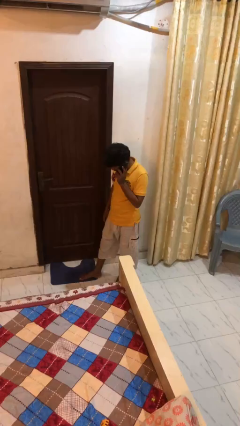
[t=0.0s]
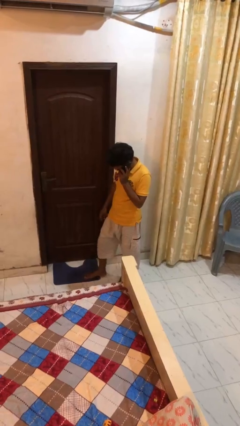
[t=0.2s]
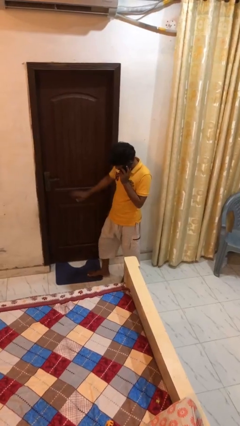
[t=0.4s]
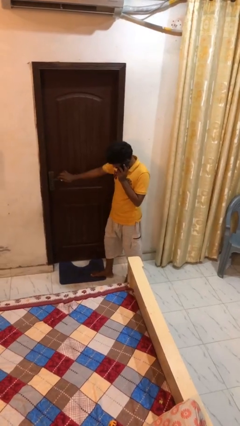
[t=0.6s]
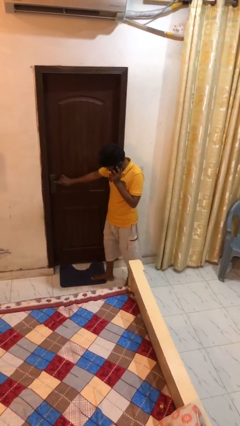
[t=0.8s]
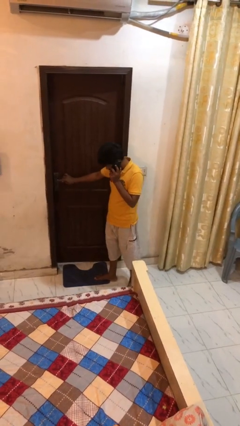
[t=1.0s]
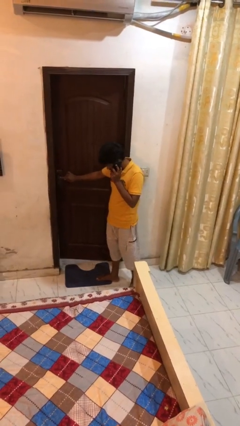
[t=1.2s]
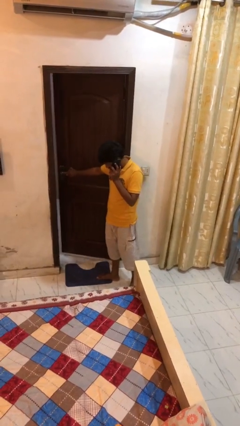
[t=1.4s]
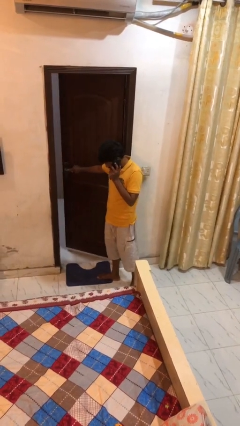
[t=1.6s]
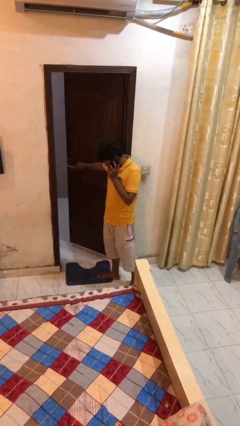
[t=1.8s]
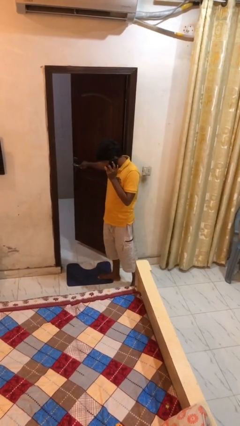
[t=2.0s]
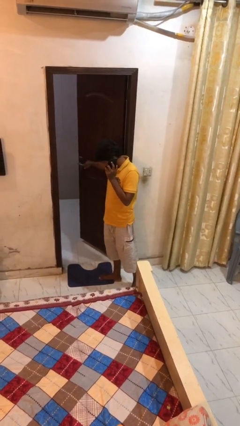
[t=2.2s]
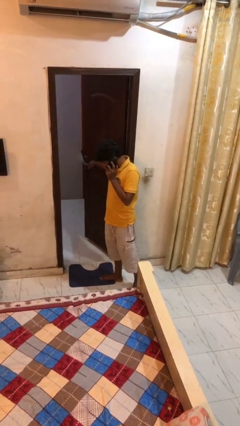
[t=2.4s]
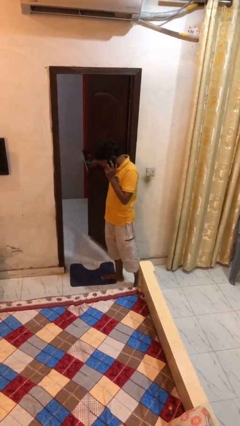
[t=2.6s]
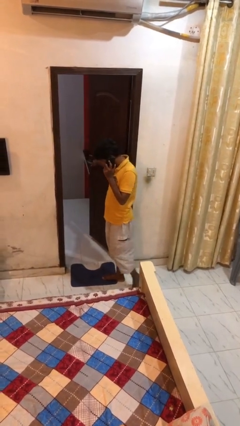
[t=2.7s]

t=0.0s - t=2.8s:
person opens facility door

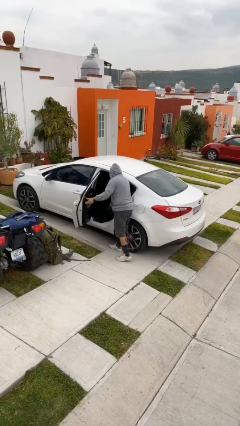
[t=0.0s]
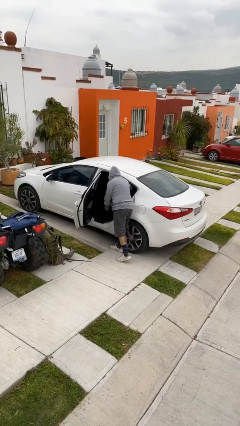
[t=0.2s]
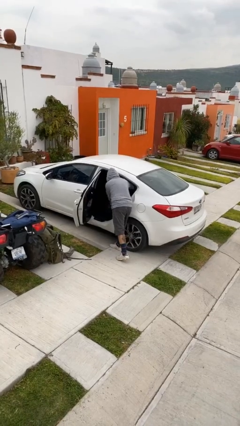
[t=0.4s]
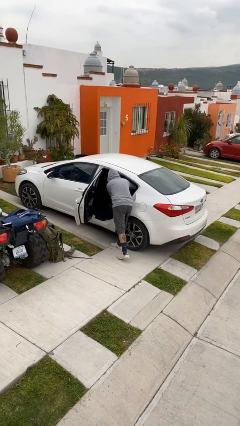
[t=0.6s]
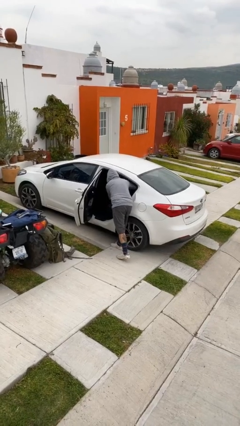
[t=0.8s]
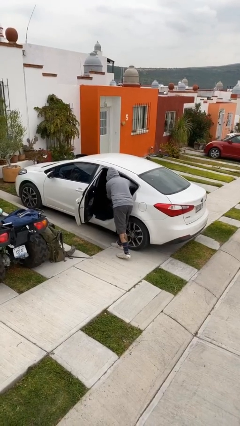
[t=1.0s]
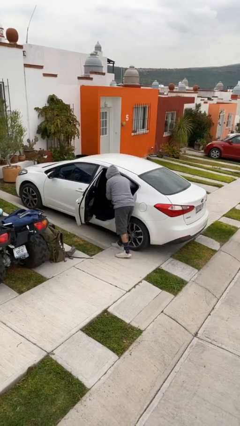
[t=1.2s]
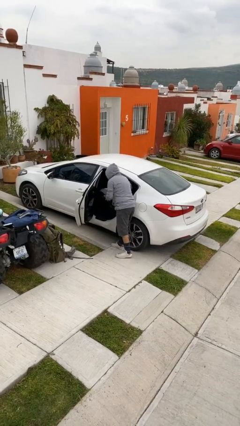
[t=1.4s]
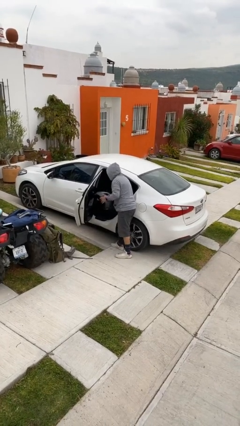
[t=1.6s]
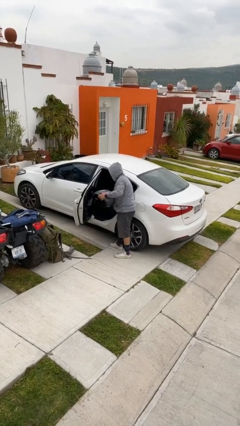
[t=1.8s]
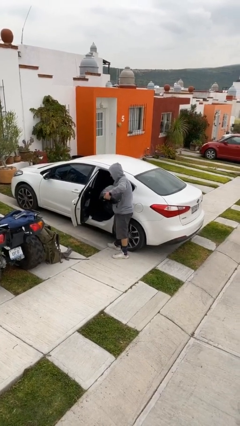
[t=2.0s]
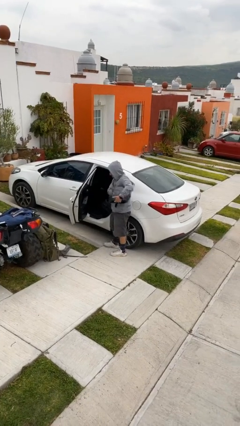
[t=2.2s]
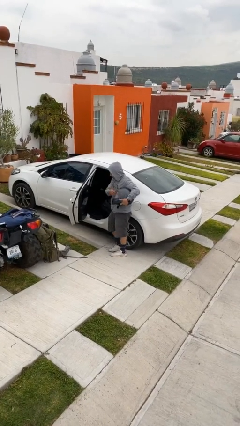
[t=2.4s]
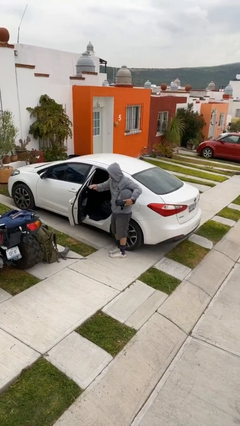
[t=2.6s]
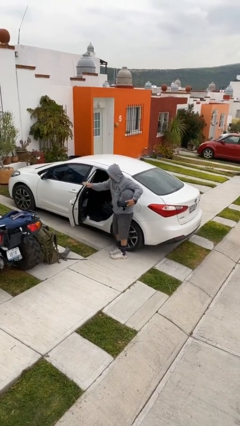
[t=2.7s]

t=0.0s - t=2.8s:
person unloads car

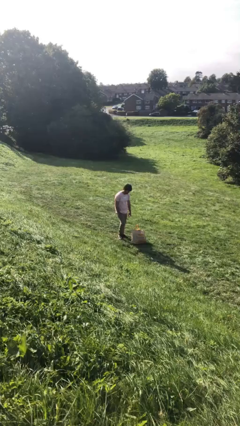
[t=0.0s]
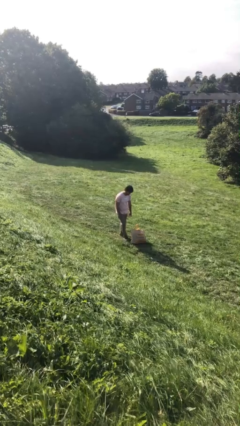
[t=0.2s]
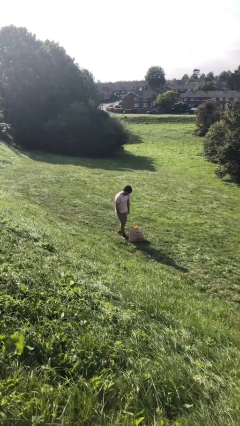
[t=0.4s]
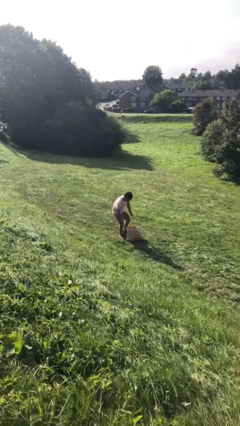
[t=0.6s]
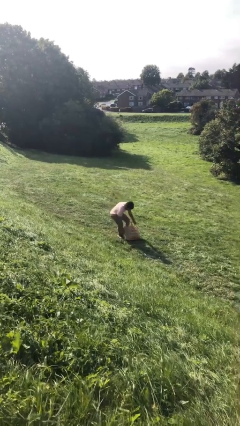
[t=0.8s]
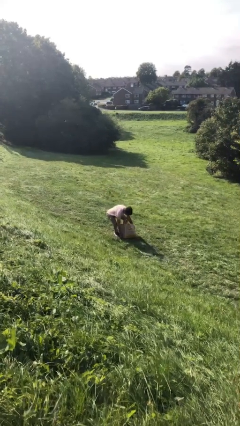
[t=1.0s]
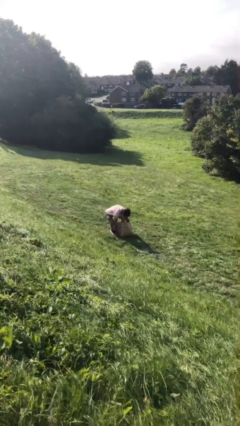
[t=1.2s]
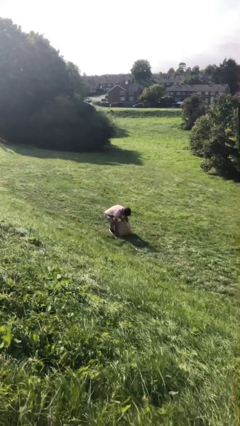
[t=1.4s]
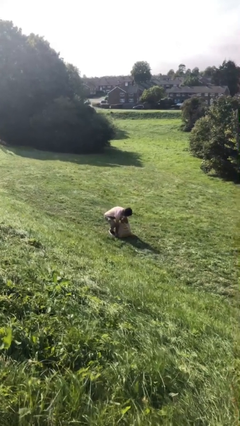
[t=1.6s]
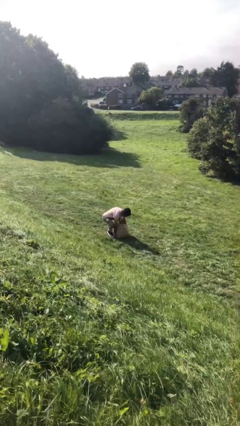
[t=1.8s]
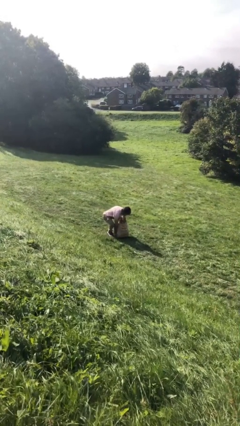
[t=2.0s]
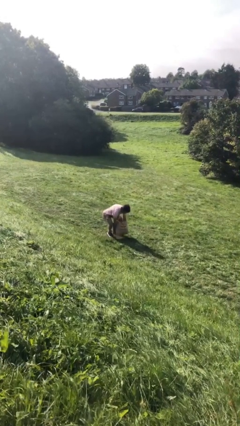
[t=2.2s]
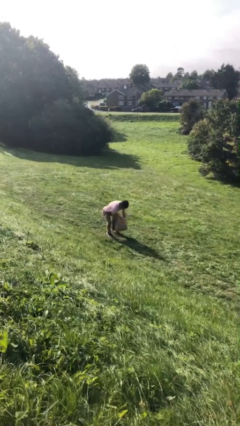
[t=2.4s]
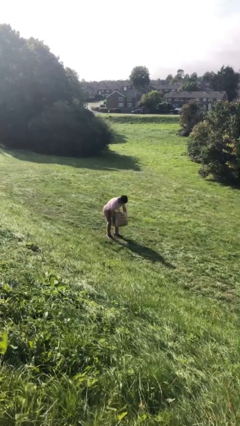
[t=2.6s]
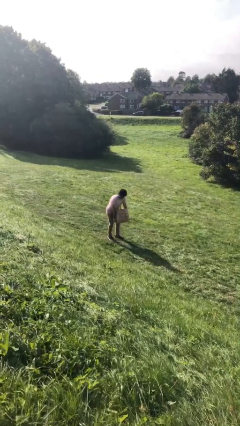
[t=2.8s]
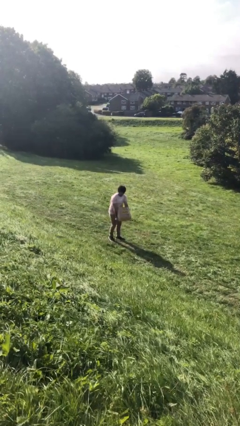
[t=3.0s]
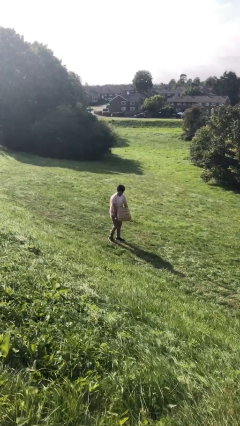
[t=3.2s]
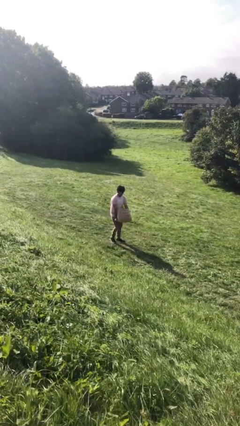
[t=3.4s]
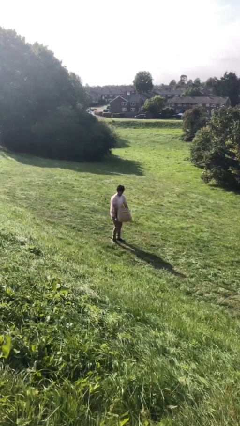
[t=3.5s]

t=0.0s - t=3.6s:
person picks up object from floor

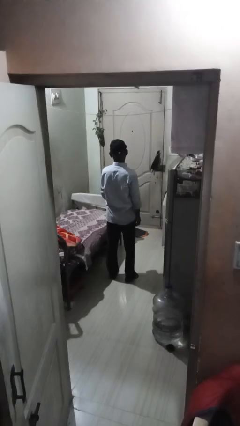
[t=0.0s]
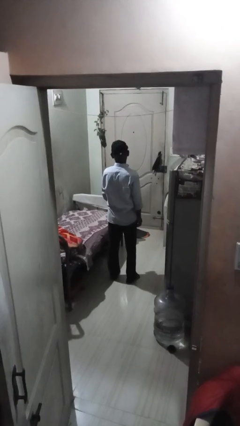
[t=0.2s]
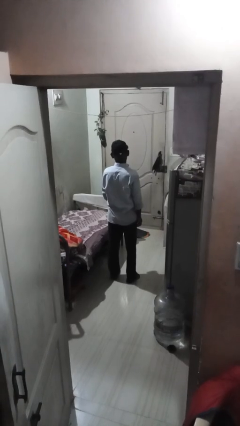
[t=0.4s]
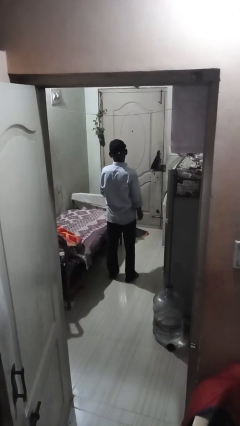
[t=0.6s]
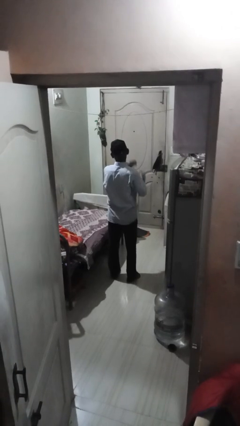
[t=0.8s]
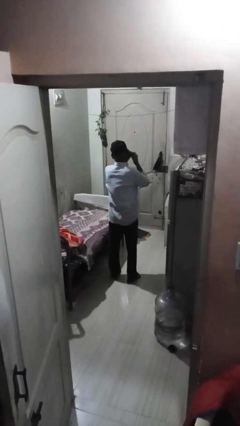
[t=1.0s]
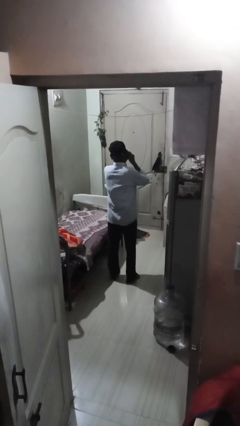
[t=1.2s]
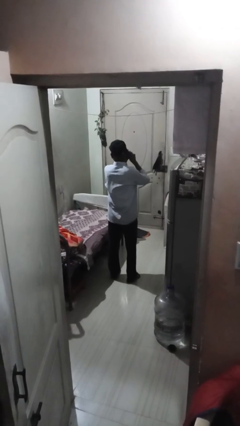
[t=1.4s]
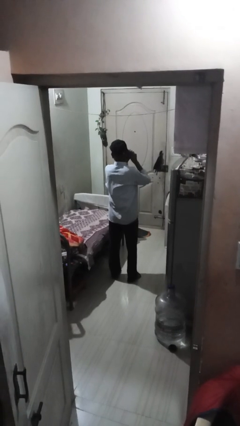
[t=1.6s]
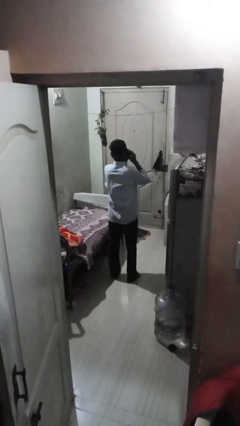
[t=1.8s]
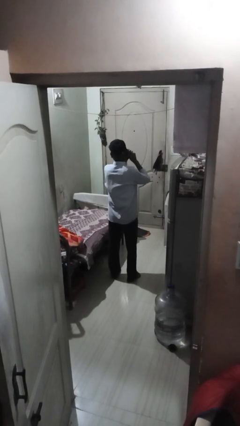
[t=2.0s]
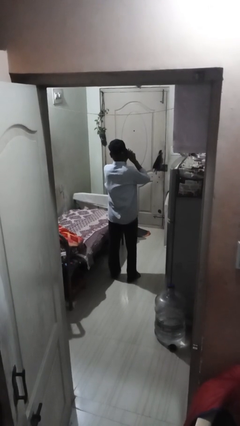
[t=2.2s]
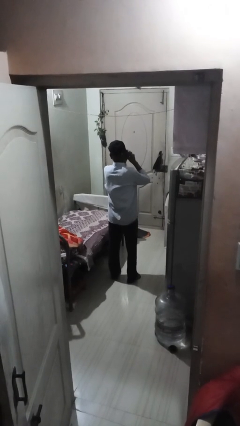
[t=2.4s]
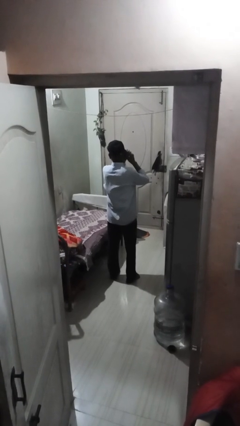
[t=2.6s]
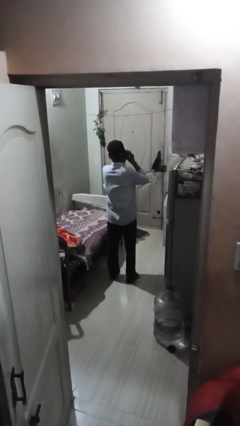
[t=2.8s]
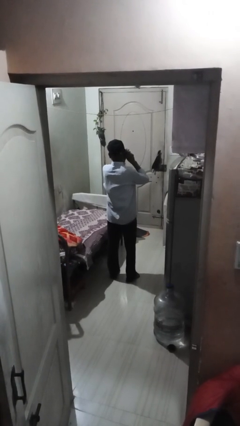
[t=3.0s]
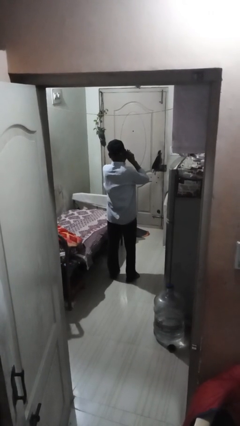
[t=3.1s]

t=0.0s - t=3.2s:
person takes off earrings

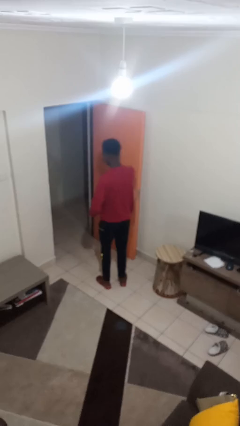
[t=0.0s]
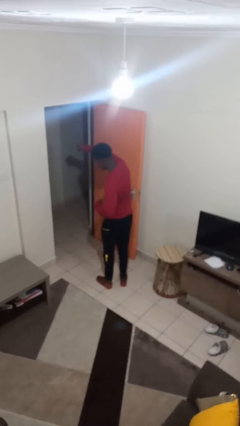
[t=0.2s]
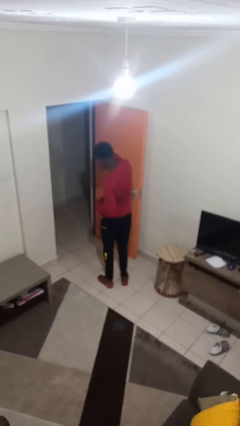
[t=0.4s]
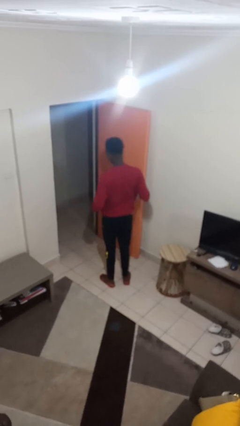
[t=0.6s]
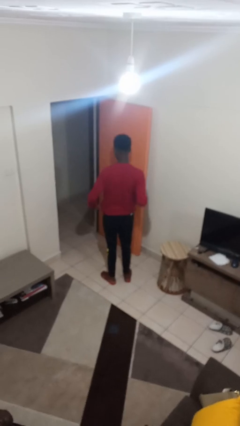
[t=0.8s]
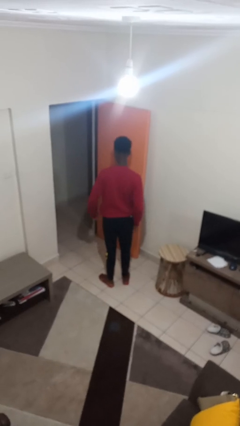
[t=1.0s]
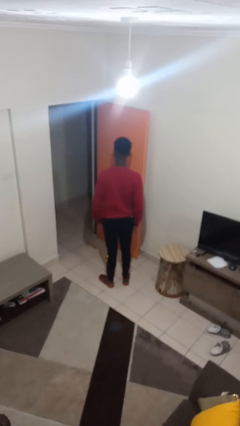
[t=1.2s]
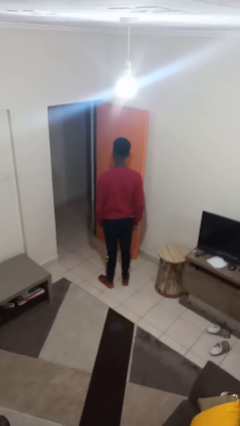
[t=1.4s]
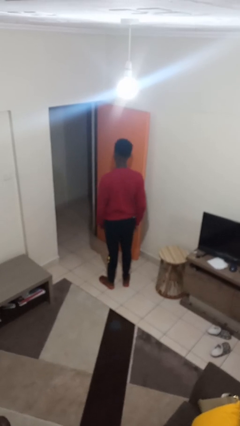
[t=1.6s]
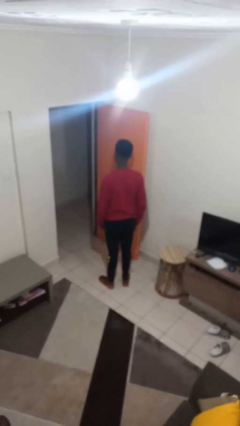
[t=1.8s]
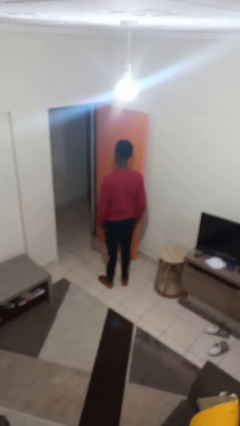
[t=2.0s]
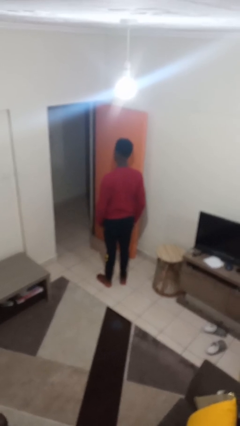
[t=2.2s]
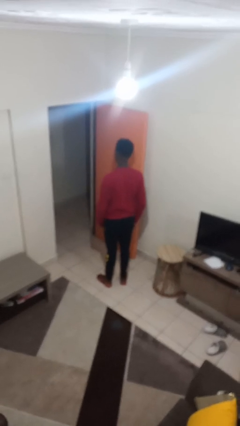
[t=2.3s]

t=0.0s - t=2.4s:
person punches

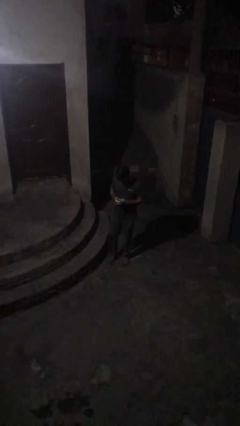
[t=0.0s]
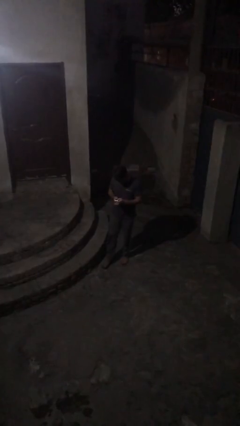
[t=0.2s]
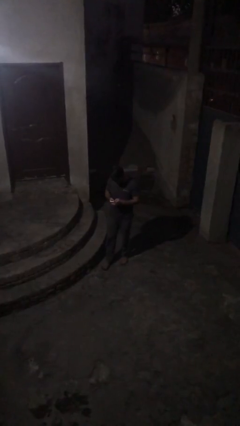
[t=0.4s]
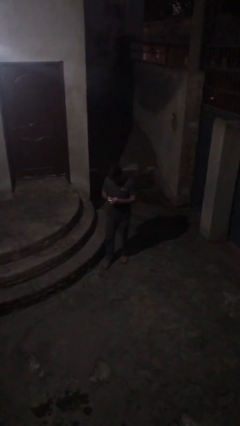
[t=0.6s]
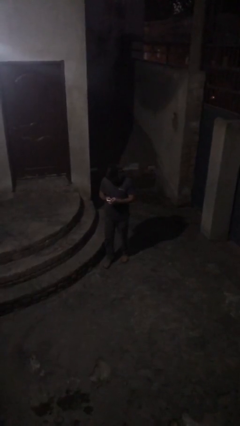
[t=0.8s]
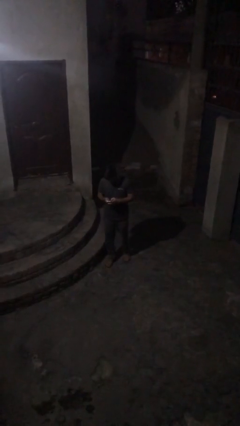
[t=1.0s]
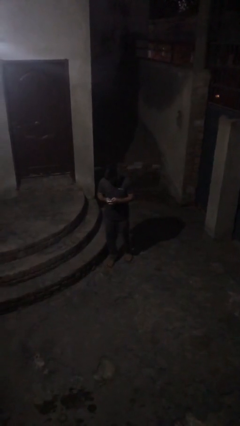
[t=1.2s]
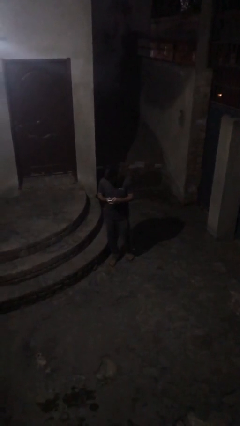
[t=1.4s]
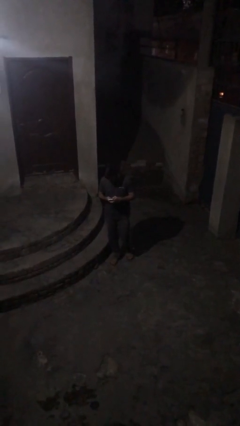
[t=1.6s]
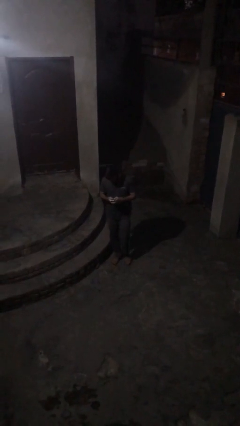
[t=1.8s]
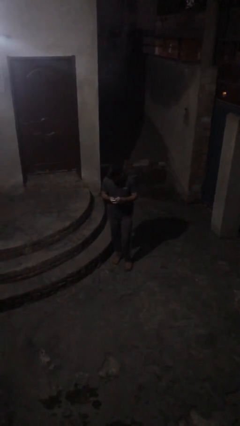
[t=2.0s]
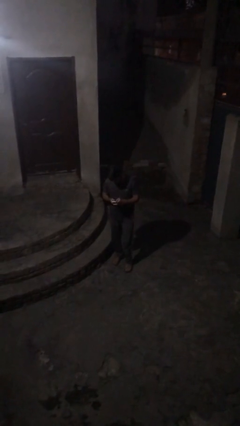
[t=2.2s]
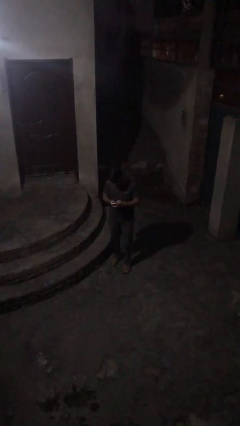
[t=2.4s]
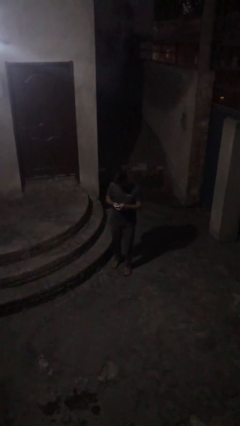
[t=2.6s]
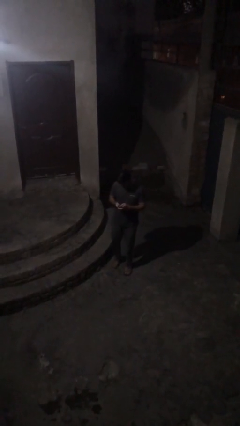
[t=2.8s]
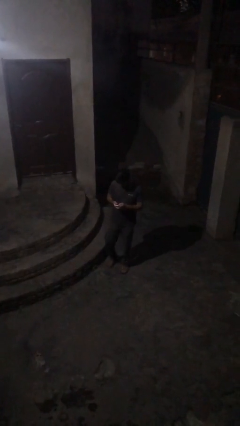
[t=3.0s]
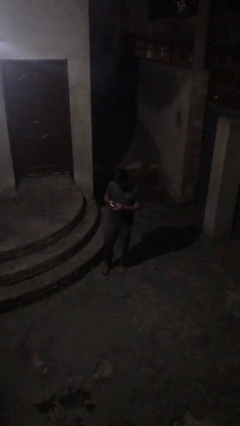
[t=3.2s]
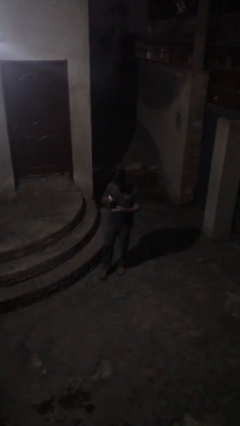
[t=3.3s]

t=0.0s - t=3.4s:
person texts on phone
